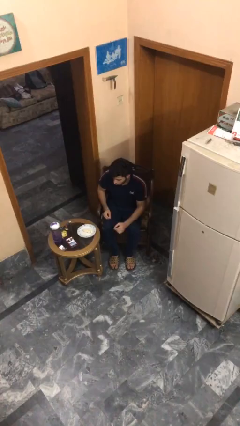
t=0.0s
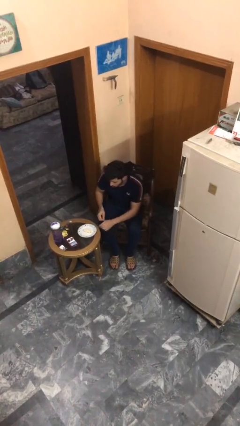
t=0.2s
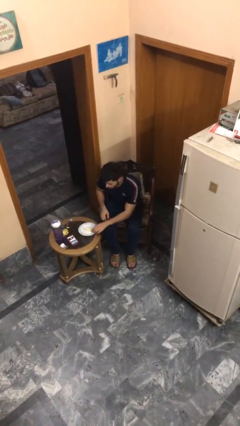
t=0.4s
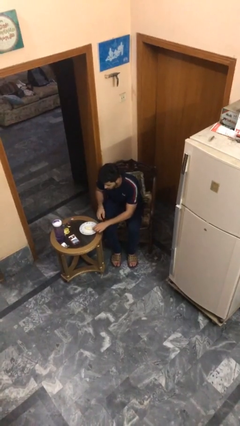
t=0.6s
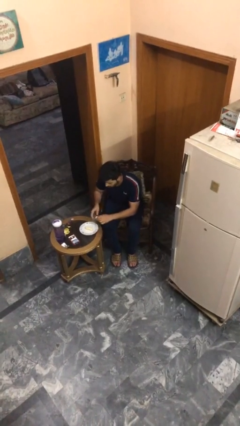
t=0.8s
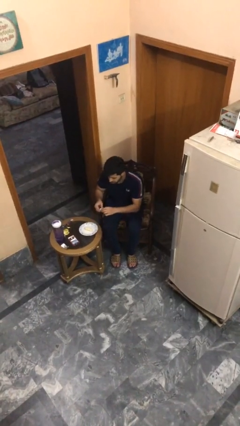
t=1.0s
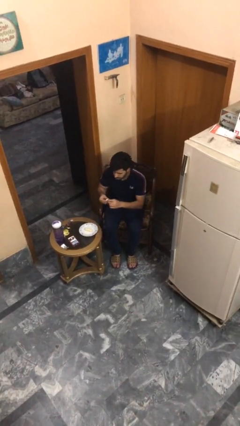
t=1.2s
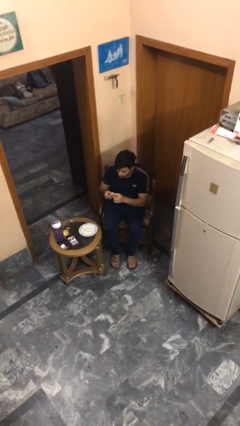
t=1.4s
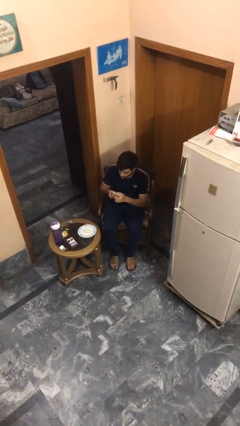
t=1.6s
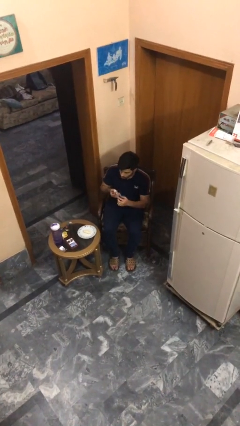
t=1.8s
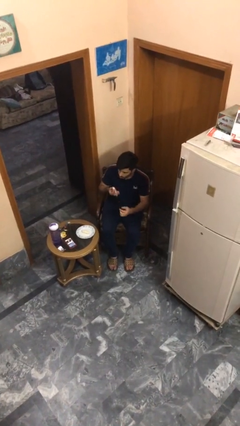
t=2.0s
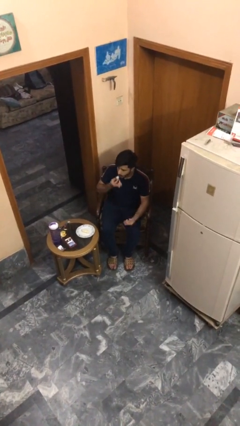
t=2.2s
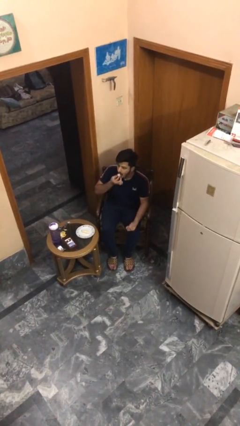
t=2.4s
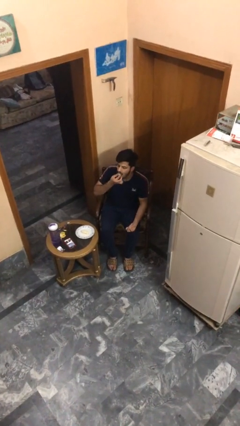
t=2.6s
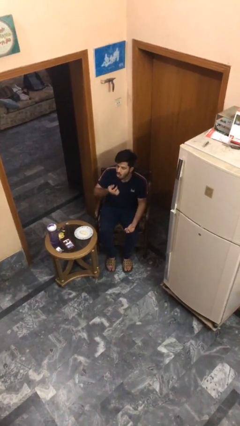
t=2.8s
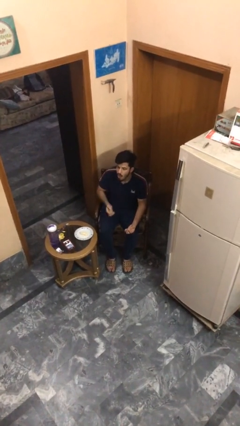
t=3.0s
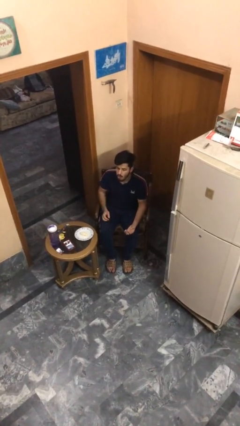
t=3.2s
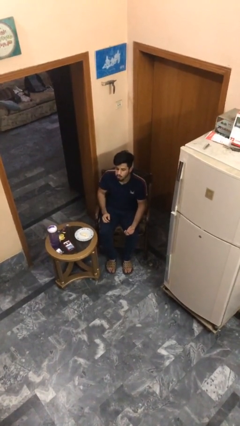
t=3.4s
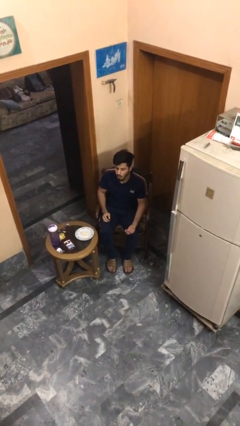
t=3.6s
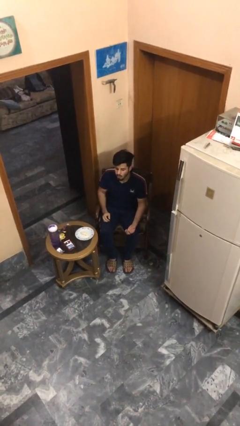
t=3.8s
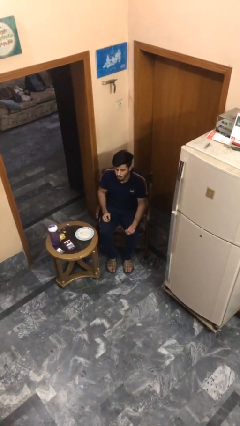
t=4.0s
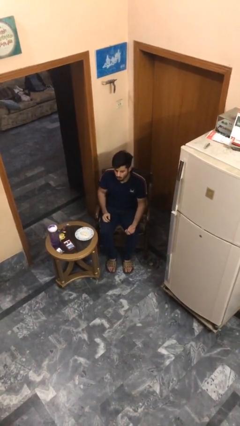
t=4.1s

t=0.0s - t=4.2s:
person eats with hands

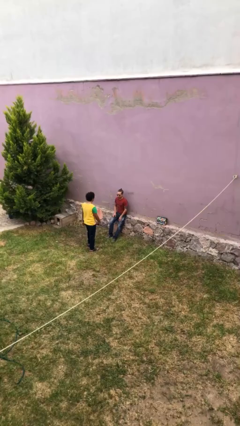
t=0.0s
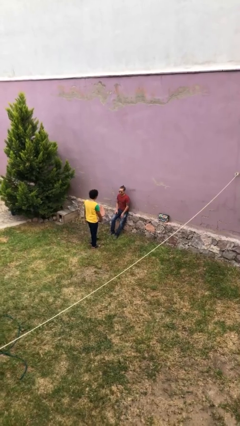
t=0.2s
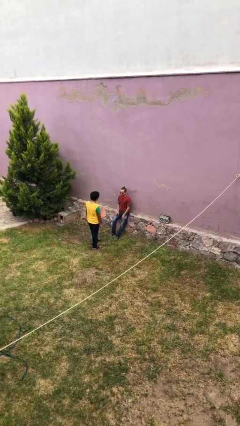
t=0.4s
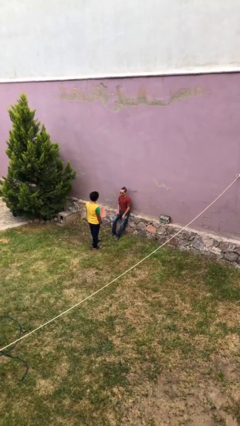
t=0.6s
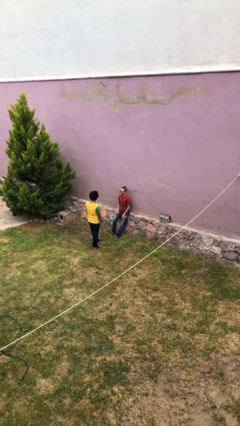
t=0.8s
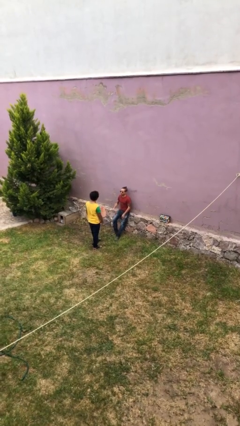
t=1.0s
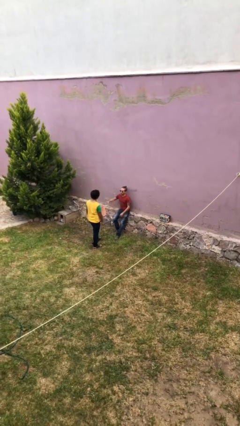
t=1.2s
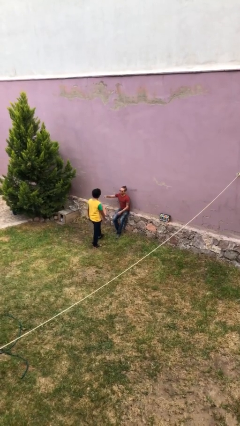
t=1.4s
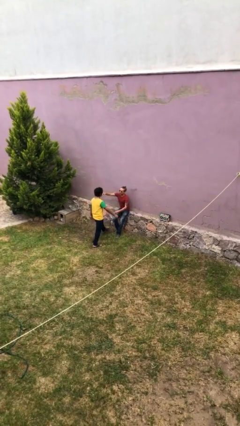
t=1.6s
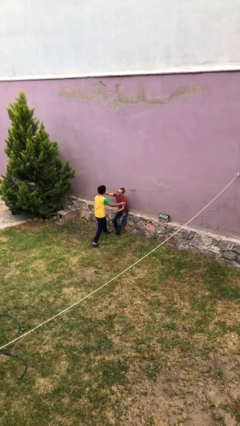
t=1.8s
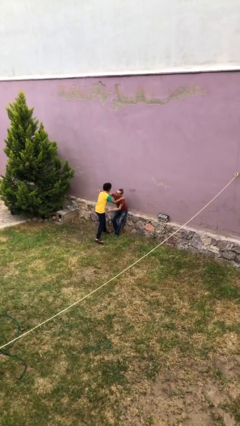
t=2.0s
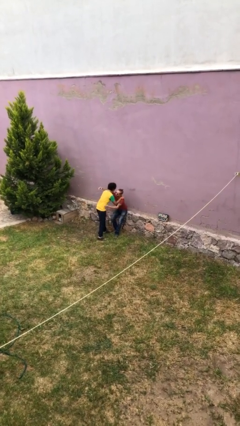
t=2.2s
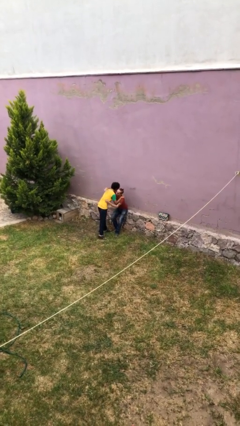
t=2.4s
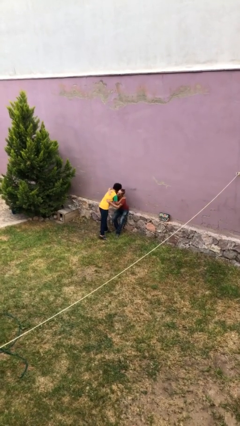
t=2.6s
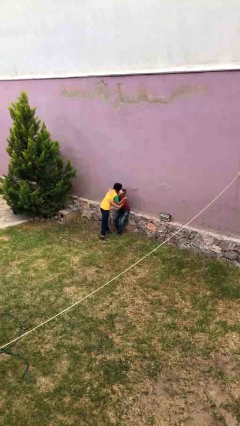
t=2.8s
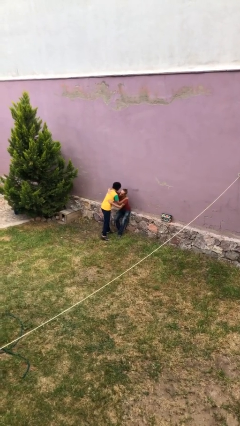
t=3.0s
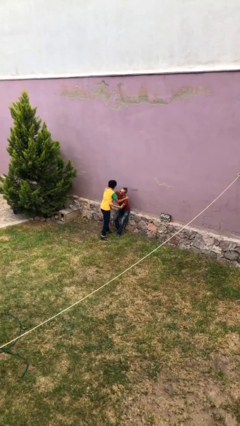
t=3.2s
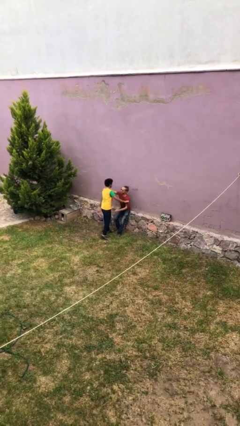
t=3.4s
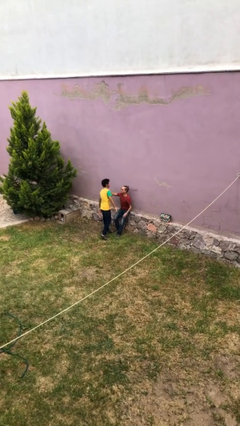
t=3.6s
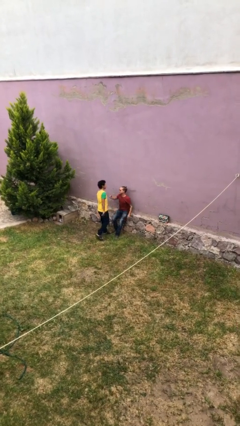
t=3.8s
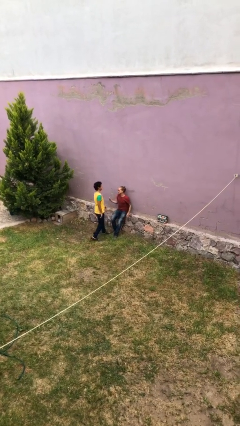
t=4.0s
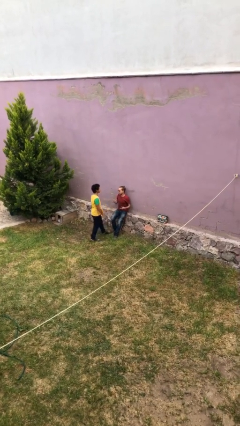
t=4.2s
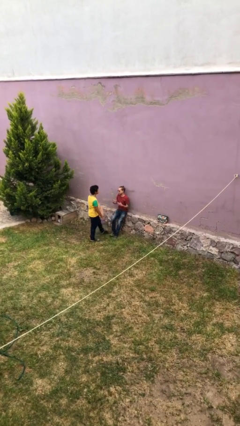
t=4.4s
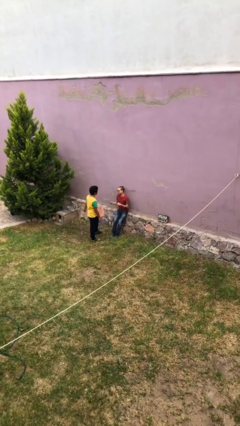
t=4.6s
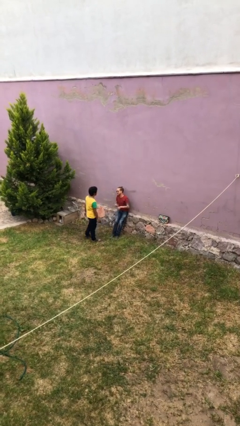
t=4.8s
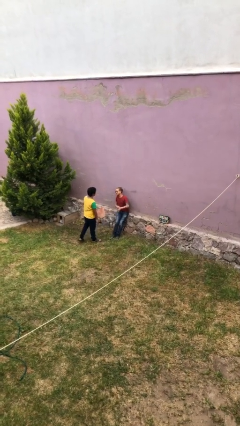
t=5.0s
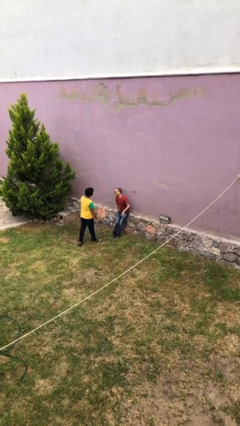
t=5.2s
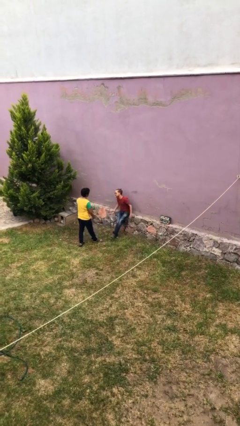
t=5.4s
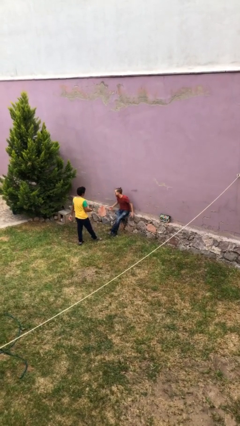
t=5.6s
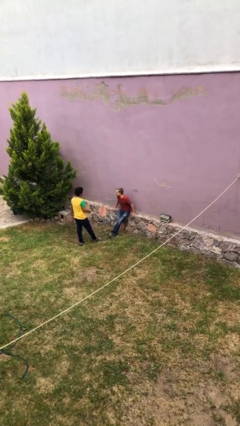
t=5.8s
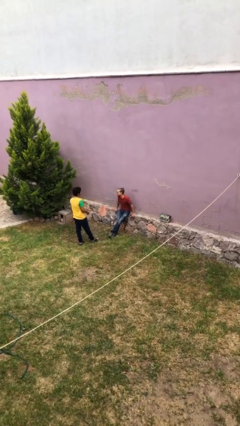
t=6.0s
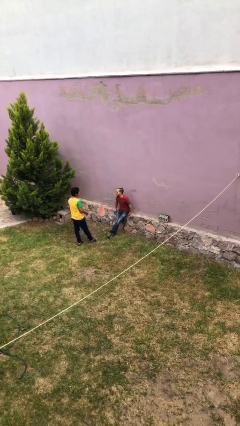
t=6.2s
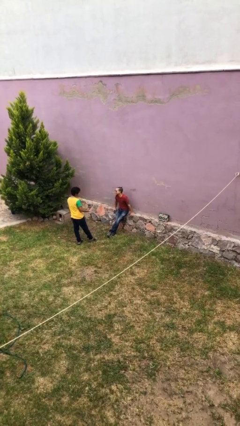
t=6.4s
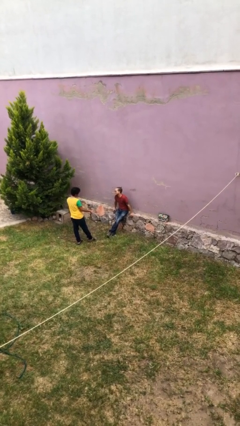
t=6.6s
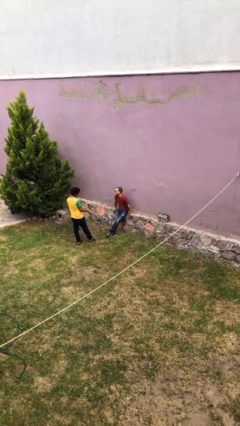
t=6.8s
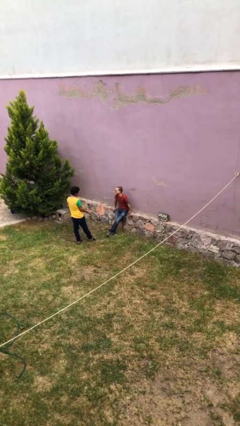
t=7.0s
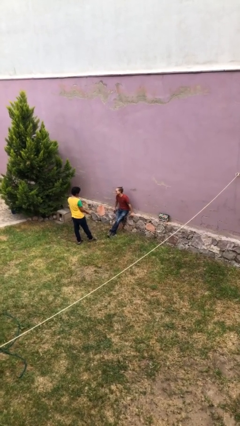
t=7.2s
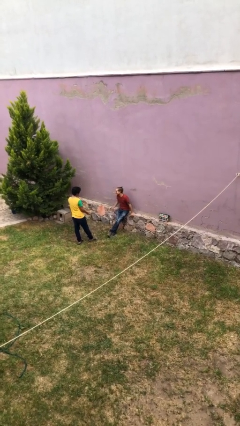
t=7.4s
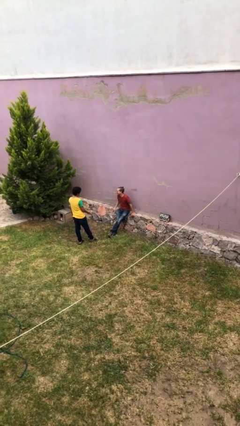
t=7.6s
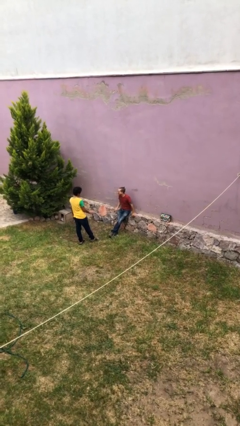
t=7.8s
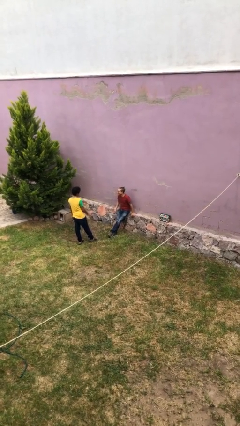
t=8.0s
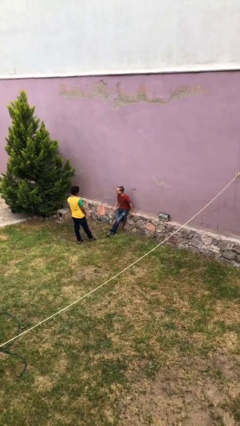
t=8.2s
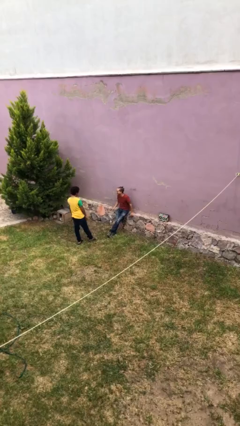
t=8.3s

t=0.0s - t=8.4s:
person embraces person

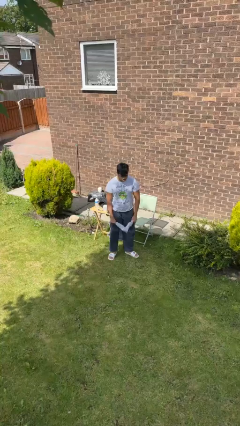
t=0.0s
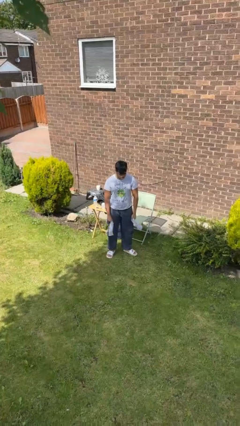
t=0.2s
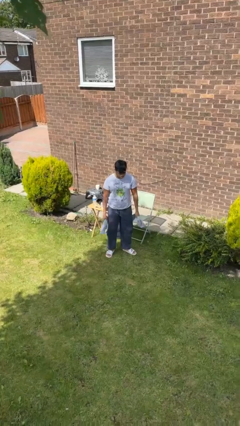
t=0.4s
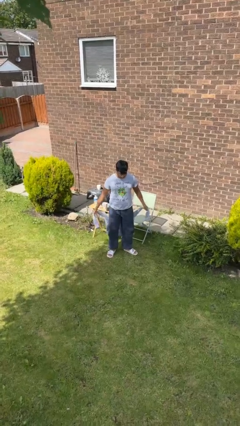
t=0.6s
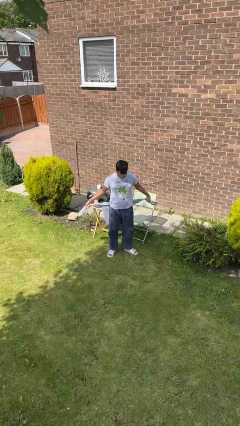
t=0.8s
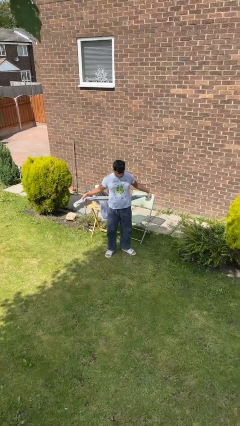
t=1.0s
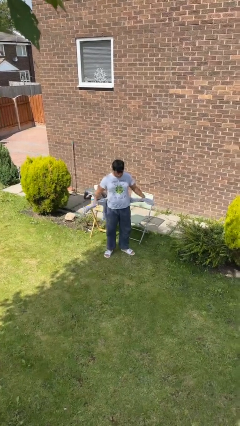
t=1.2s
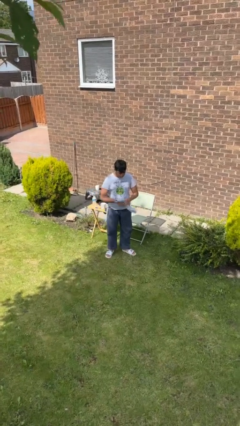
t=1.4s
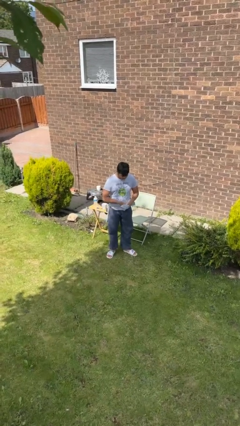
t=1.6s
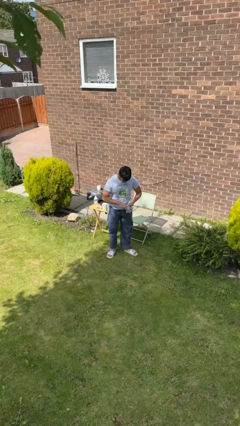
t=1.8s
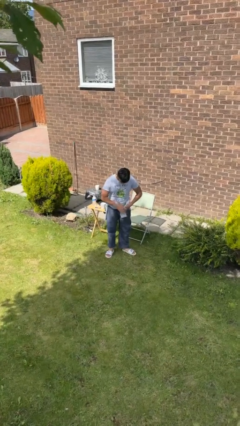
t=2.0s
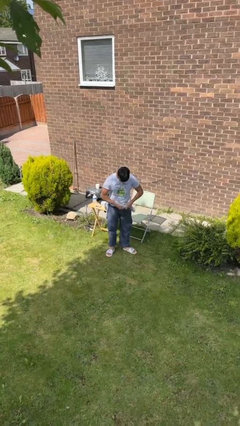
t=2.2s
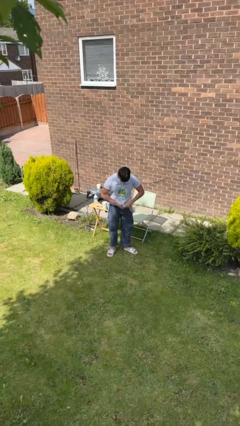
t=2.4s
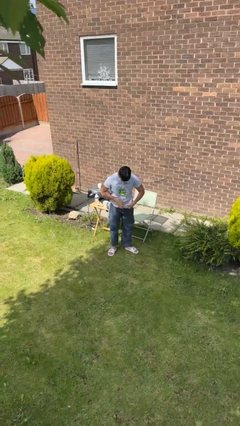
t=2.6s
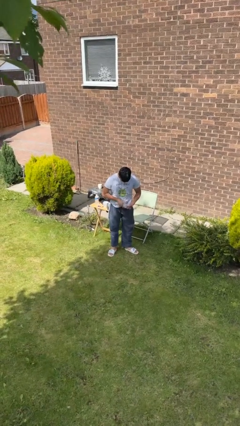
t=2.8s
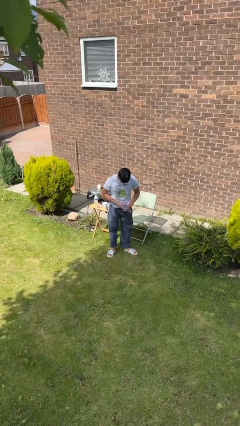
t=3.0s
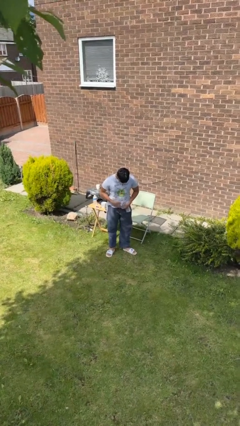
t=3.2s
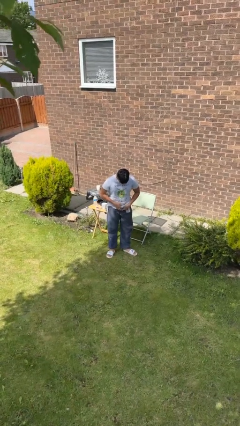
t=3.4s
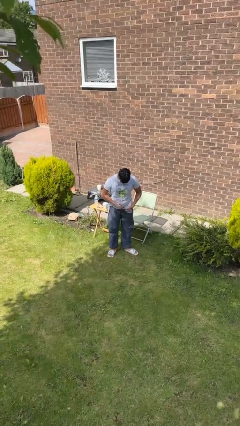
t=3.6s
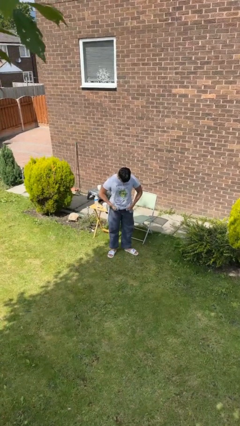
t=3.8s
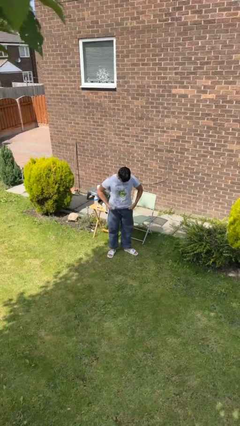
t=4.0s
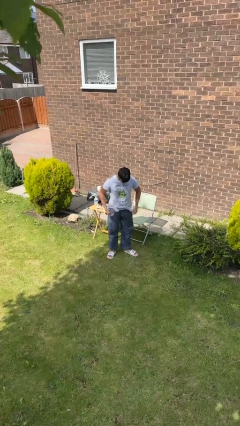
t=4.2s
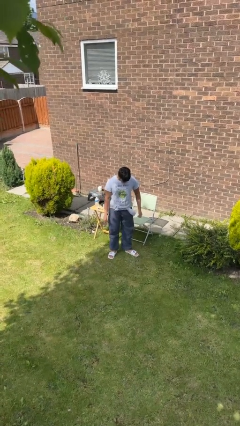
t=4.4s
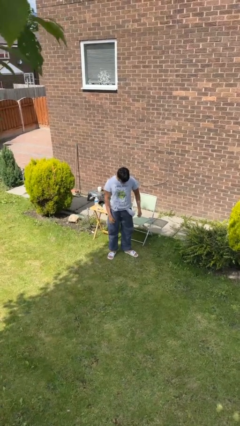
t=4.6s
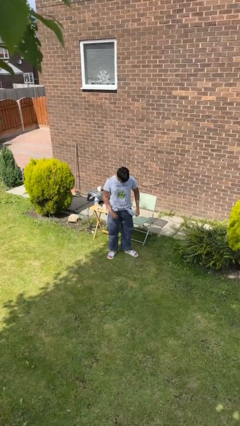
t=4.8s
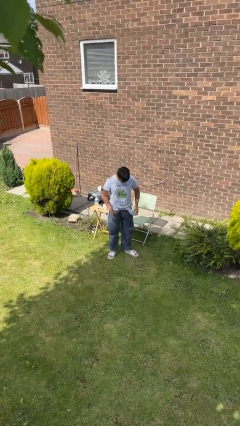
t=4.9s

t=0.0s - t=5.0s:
person ties jacket around waist
